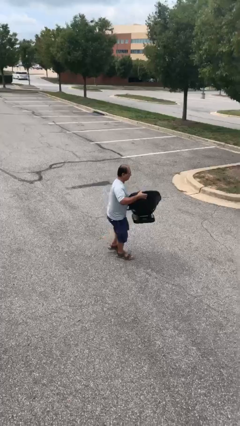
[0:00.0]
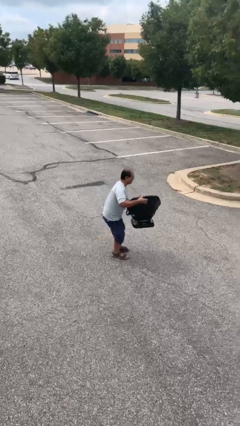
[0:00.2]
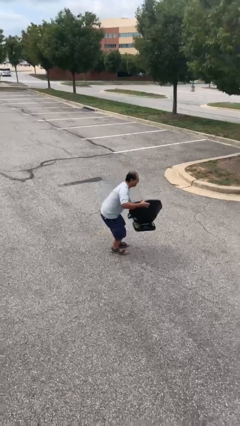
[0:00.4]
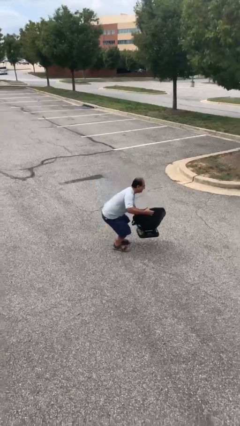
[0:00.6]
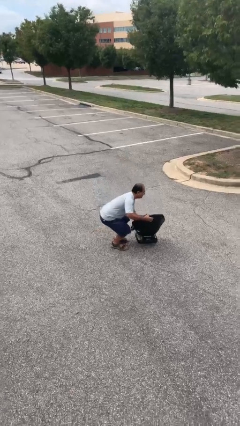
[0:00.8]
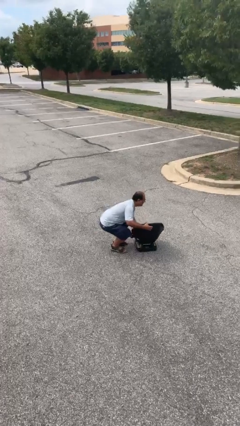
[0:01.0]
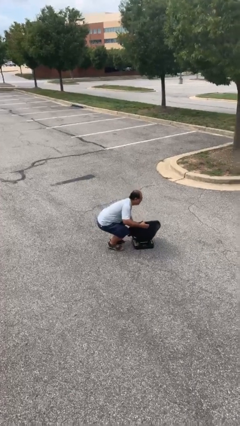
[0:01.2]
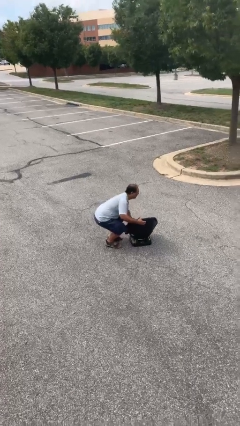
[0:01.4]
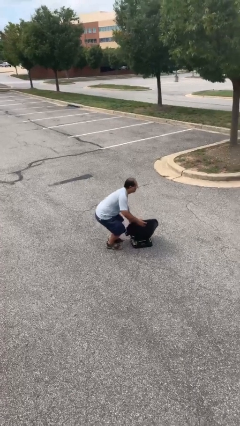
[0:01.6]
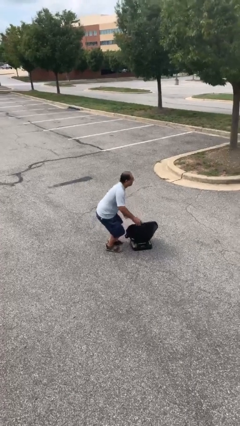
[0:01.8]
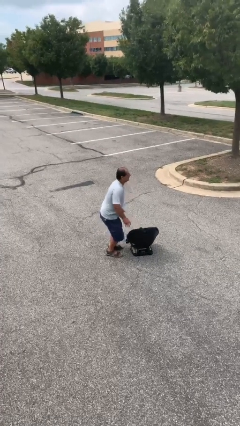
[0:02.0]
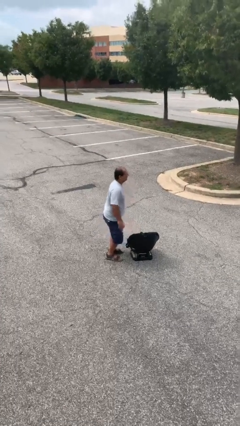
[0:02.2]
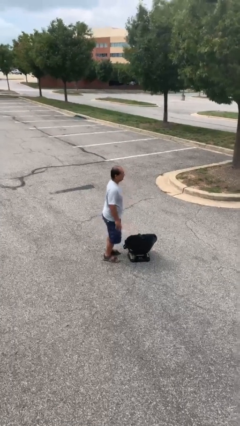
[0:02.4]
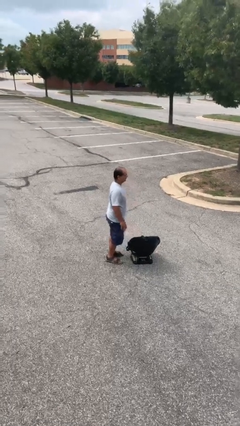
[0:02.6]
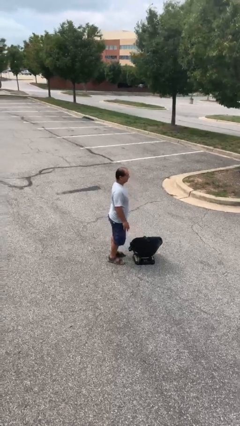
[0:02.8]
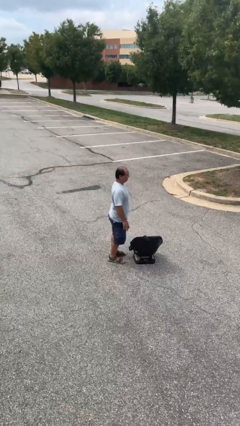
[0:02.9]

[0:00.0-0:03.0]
person puts down object on floor

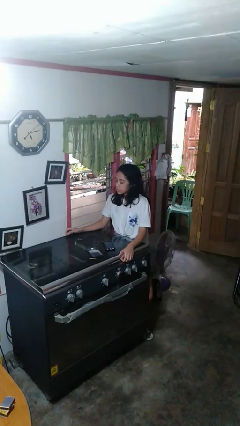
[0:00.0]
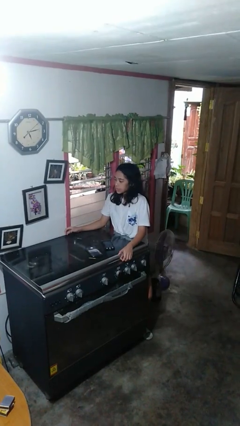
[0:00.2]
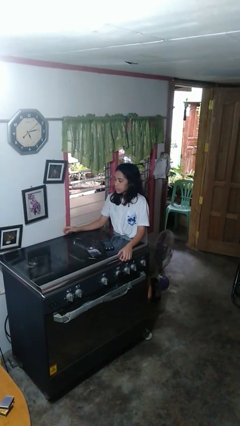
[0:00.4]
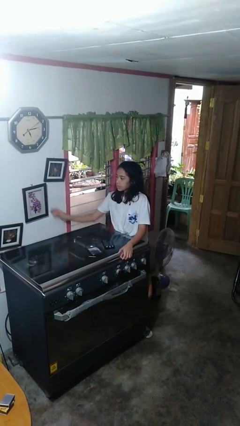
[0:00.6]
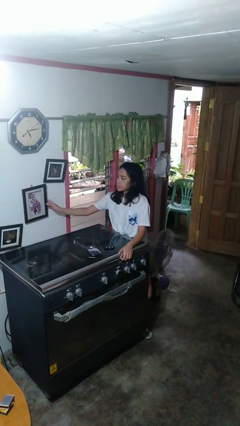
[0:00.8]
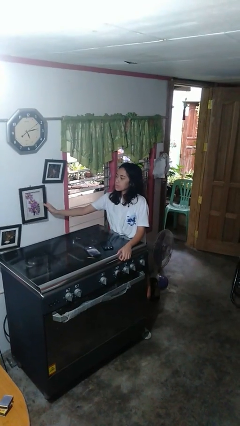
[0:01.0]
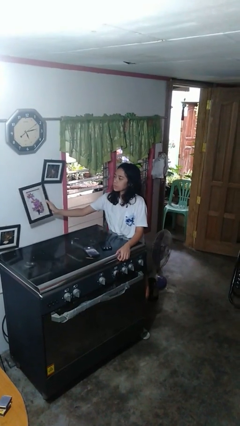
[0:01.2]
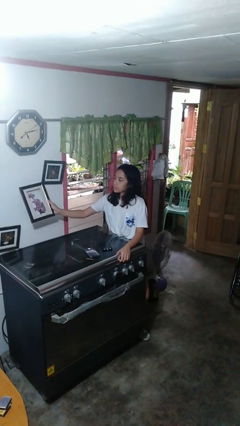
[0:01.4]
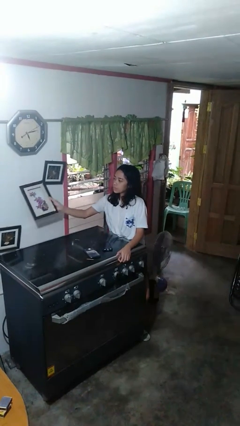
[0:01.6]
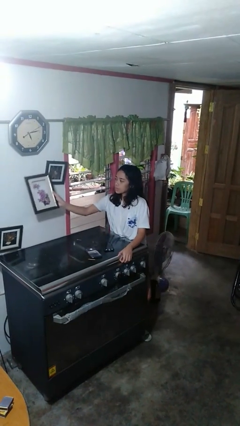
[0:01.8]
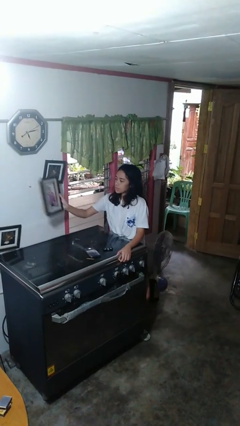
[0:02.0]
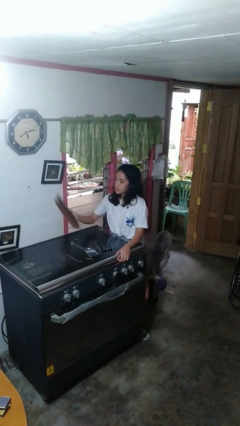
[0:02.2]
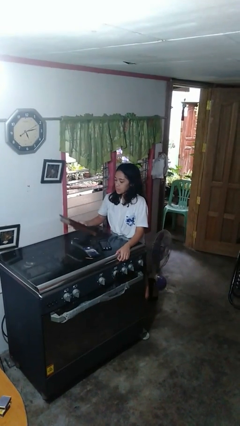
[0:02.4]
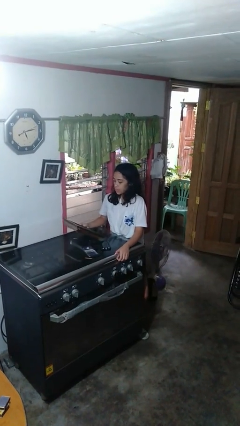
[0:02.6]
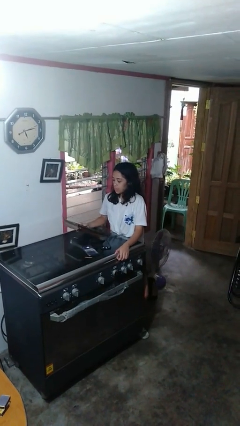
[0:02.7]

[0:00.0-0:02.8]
person takes down picture frame

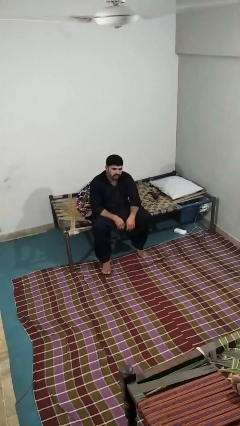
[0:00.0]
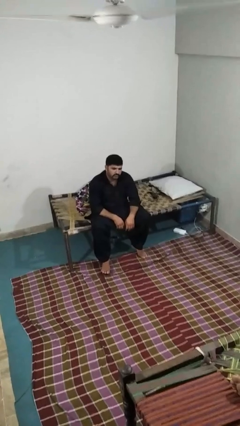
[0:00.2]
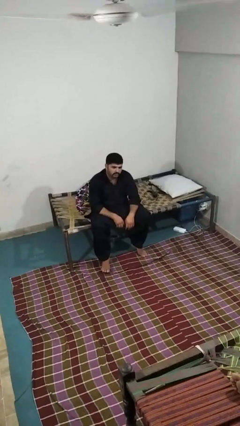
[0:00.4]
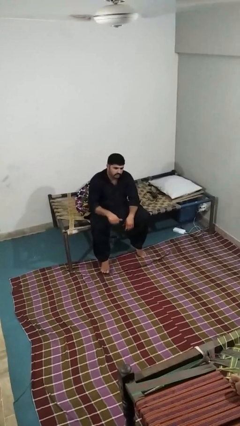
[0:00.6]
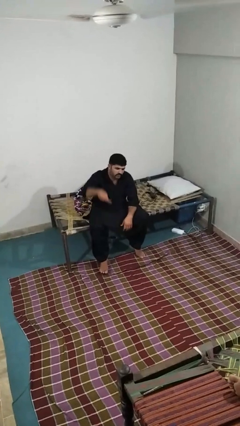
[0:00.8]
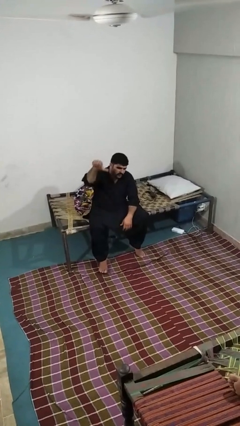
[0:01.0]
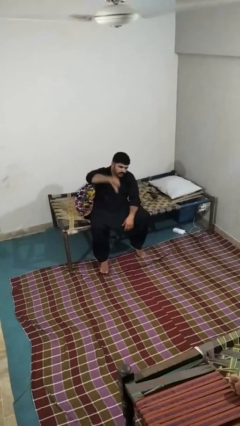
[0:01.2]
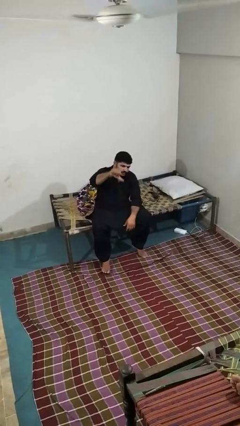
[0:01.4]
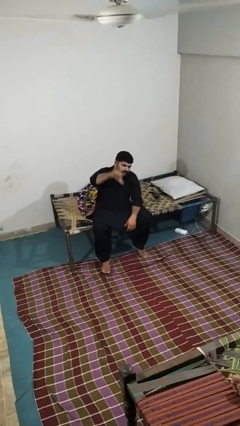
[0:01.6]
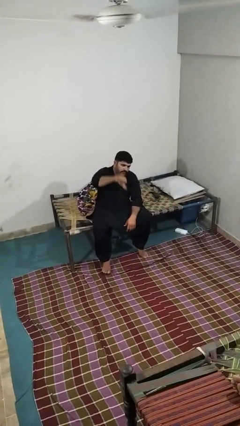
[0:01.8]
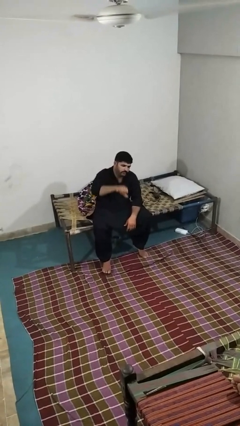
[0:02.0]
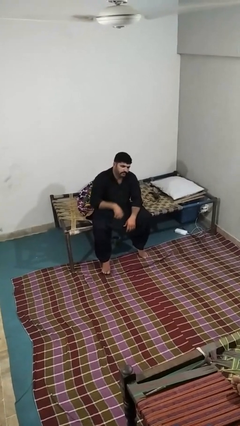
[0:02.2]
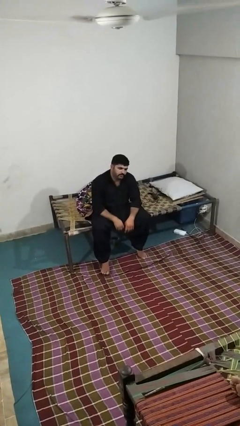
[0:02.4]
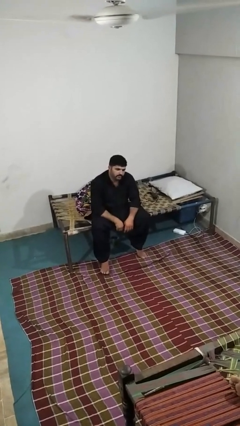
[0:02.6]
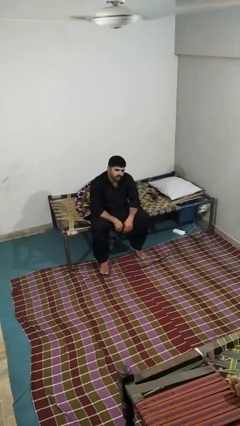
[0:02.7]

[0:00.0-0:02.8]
person gestures thumbs down

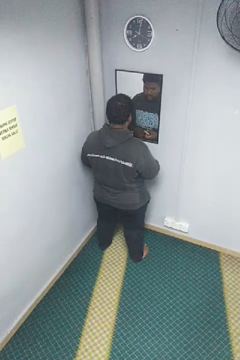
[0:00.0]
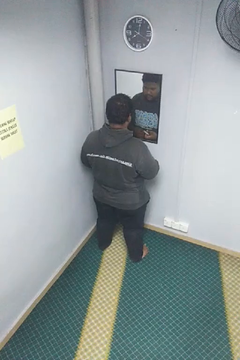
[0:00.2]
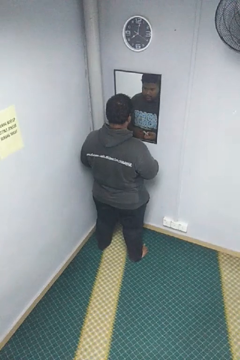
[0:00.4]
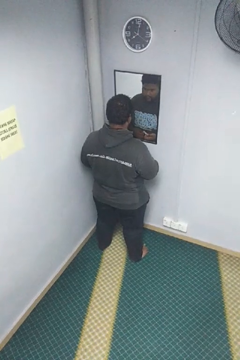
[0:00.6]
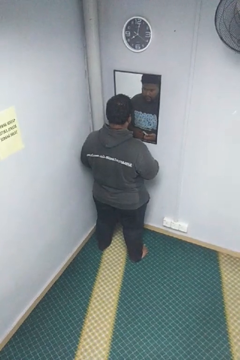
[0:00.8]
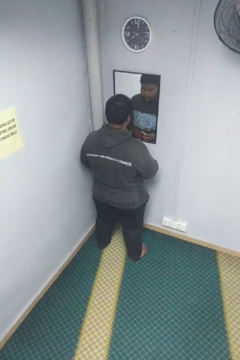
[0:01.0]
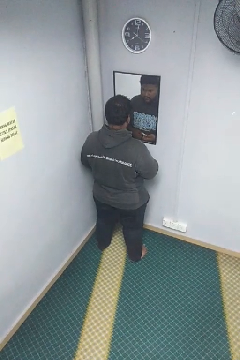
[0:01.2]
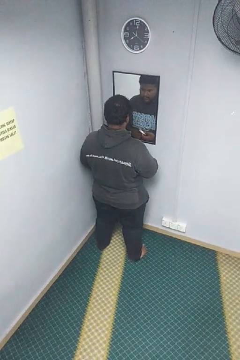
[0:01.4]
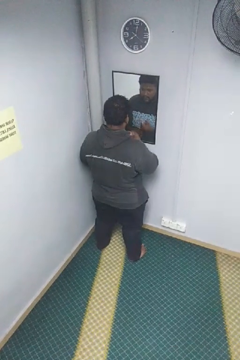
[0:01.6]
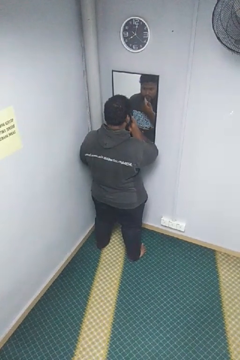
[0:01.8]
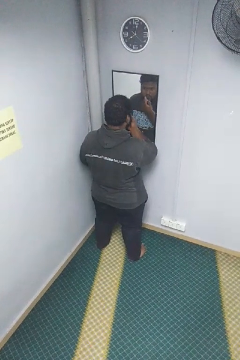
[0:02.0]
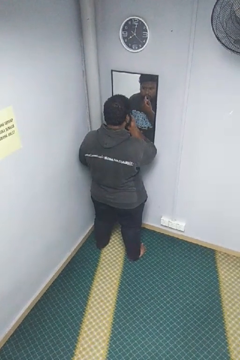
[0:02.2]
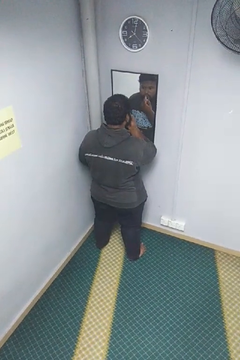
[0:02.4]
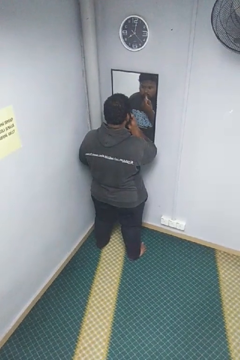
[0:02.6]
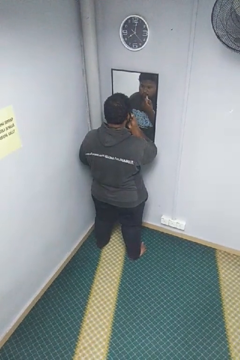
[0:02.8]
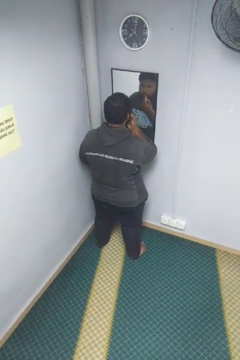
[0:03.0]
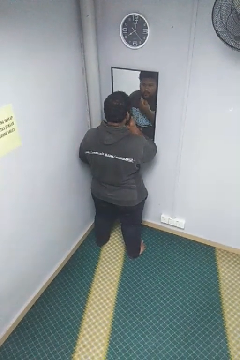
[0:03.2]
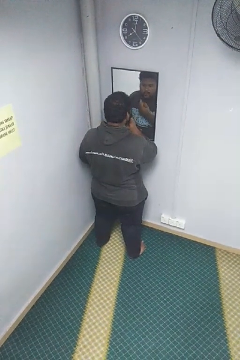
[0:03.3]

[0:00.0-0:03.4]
person applies lip makeup

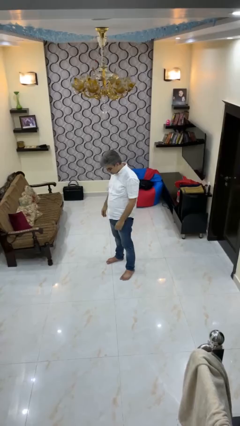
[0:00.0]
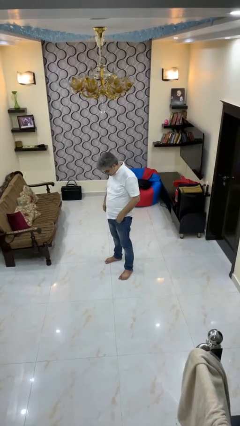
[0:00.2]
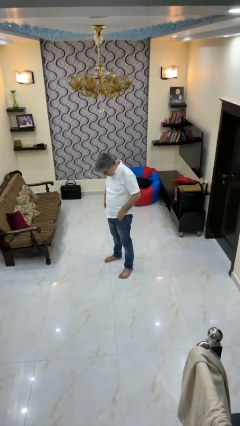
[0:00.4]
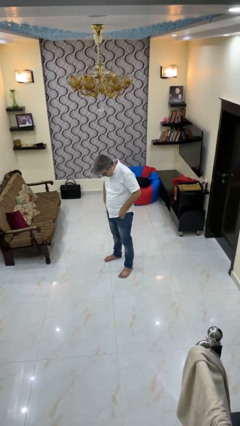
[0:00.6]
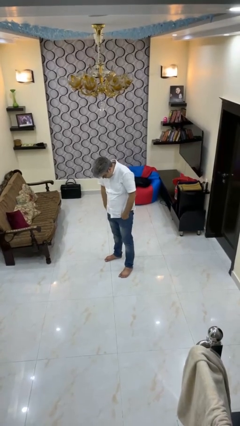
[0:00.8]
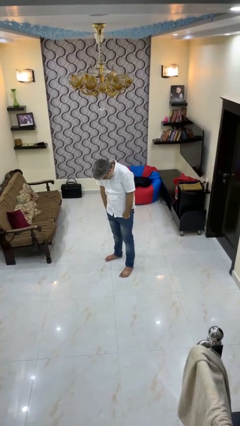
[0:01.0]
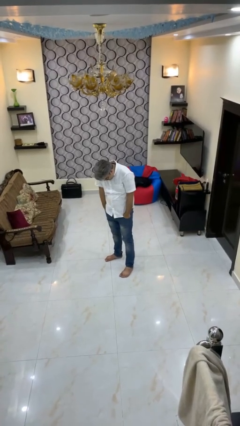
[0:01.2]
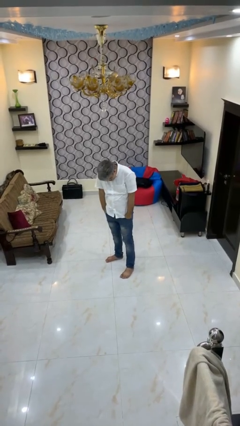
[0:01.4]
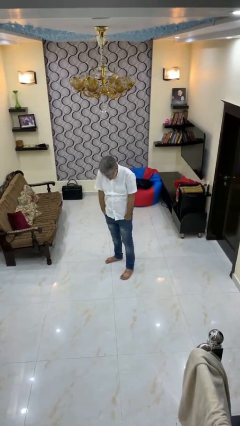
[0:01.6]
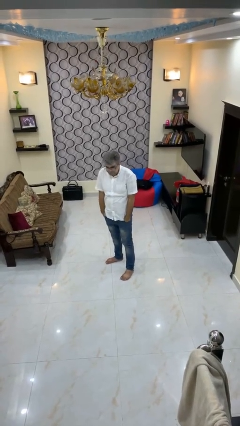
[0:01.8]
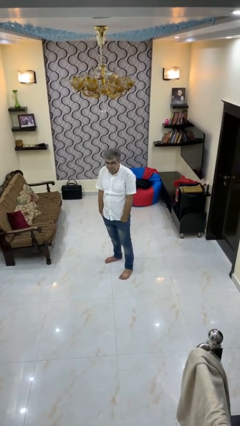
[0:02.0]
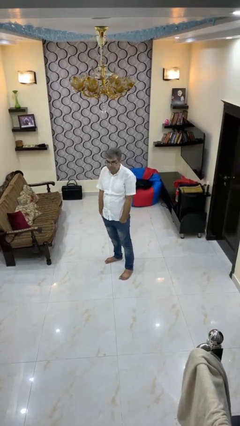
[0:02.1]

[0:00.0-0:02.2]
person puts hands in back pockets

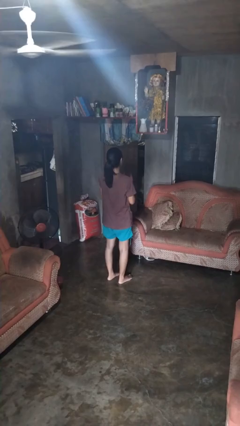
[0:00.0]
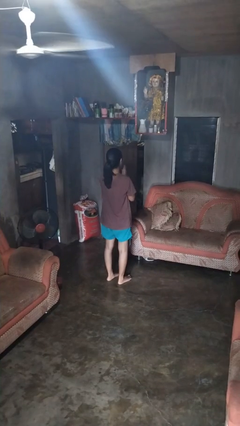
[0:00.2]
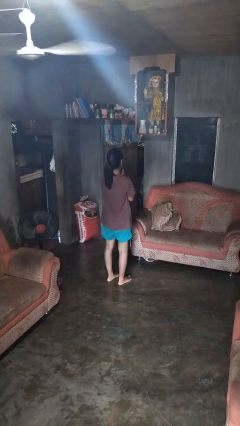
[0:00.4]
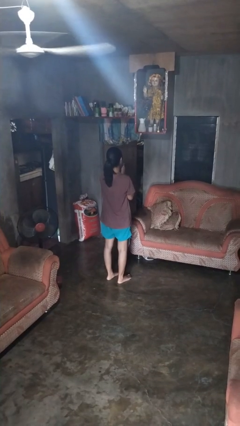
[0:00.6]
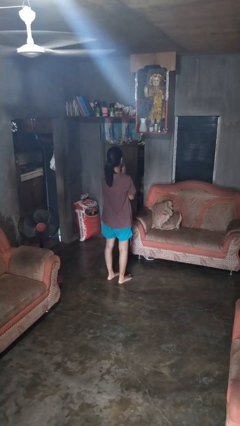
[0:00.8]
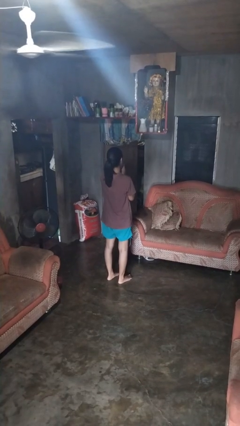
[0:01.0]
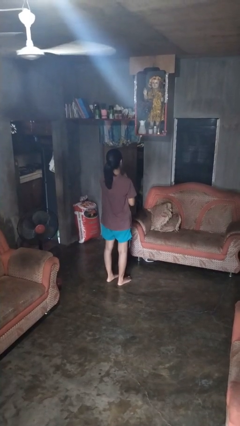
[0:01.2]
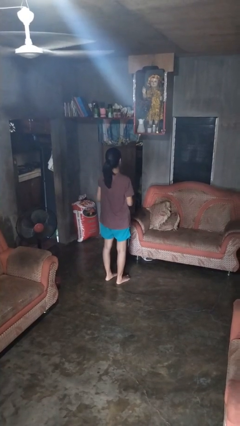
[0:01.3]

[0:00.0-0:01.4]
person prays

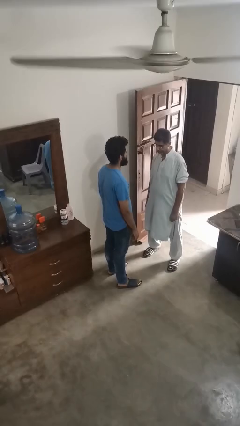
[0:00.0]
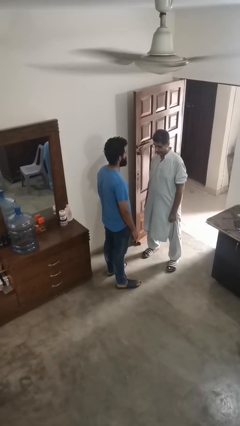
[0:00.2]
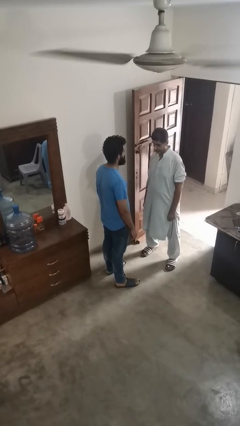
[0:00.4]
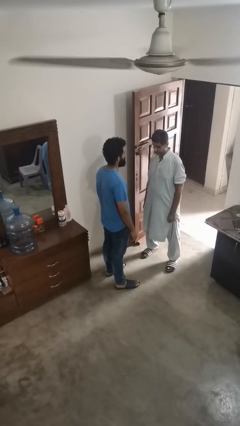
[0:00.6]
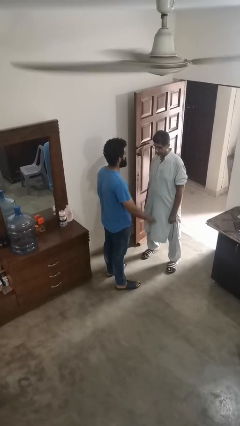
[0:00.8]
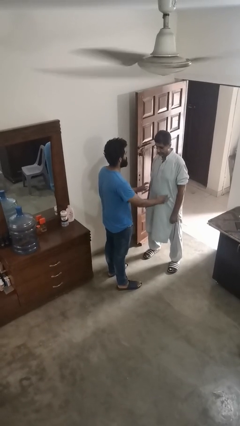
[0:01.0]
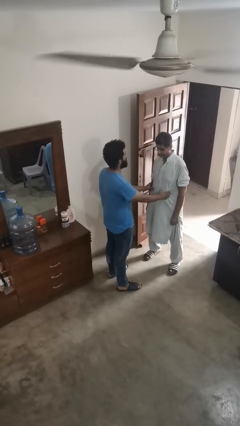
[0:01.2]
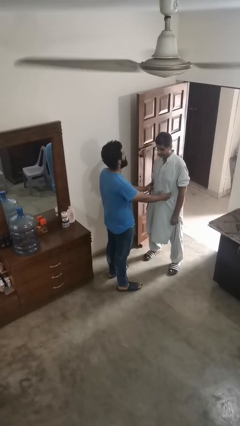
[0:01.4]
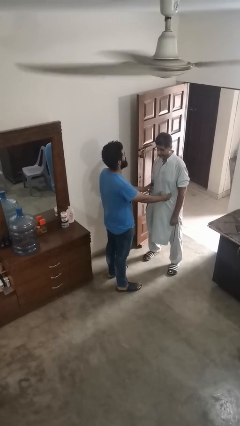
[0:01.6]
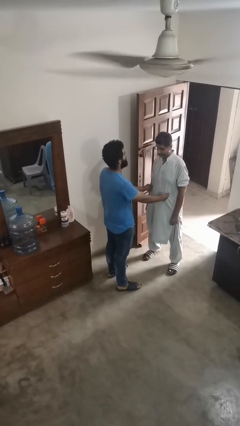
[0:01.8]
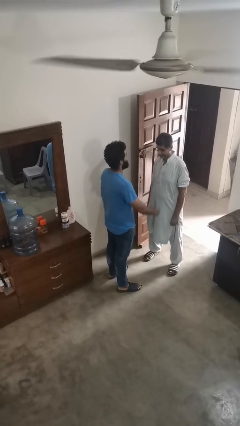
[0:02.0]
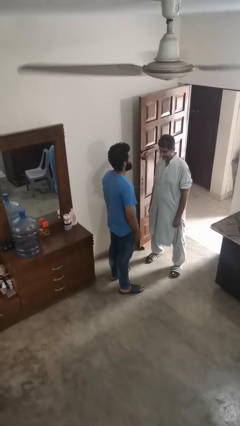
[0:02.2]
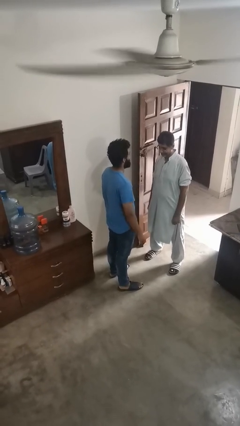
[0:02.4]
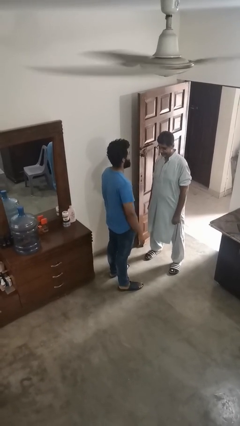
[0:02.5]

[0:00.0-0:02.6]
person tickles person
